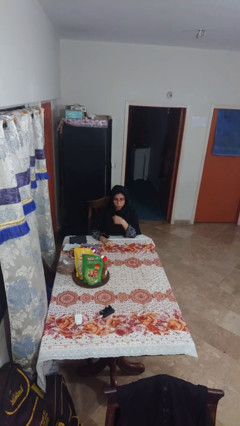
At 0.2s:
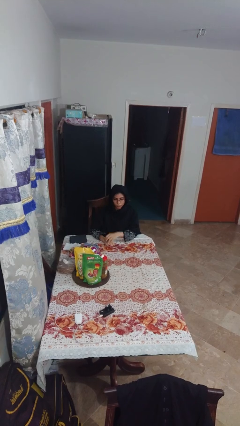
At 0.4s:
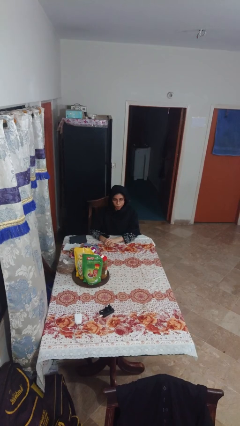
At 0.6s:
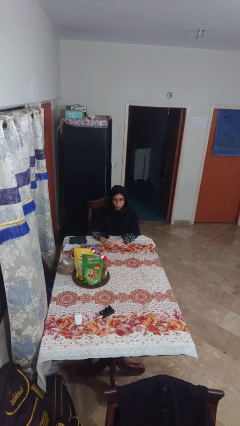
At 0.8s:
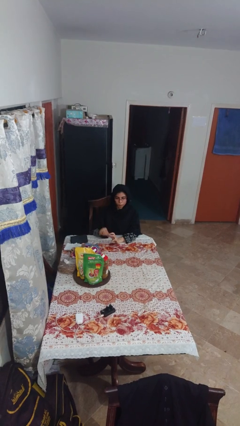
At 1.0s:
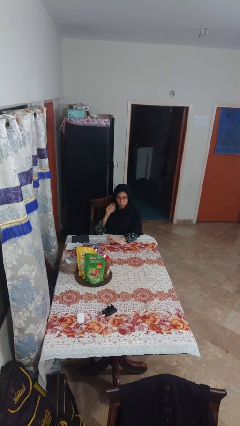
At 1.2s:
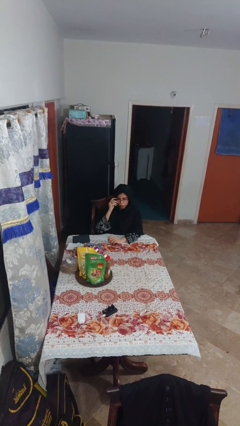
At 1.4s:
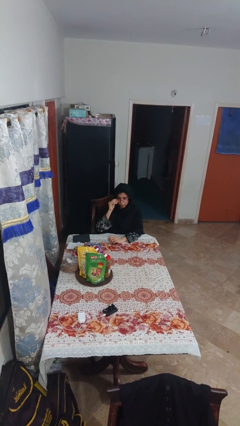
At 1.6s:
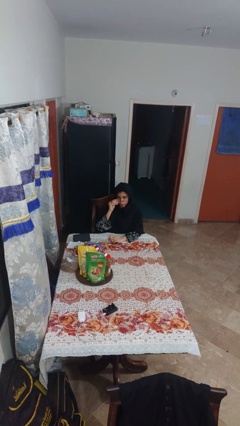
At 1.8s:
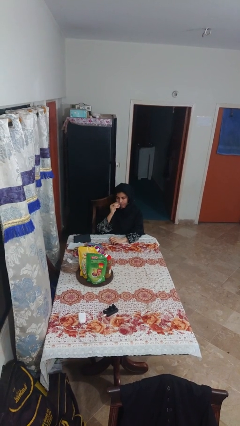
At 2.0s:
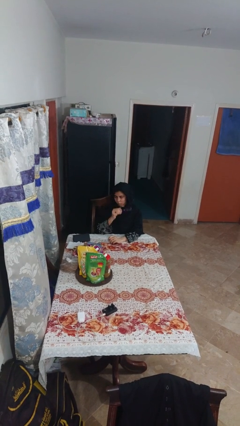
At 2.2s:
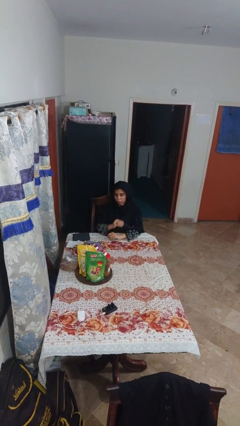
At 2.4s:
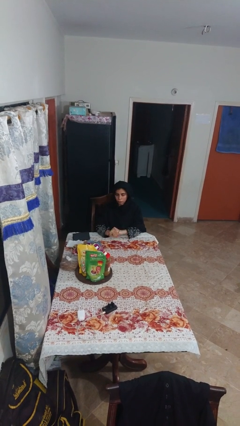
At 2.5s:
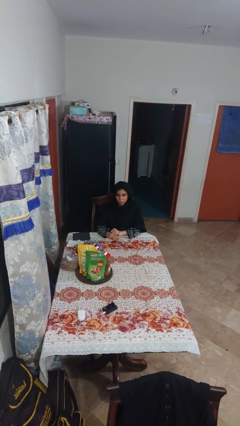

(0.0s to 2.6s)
person takes off glasses

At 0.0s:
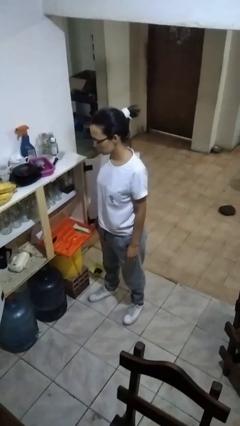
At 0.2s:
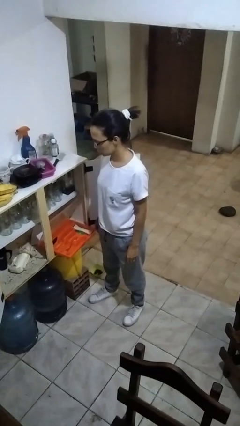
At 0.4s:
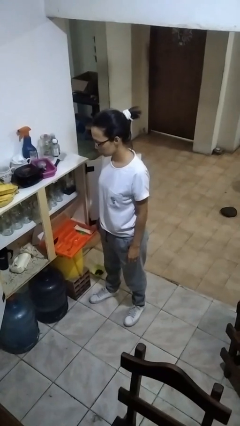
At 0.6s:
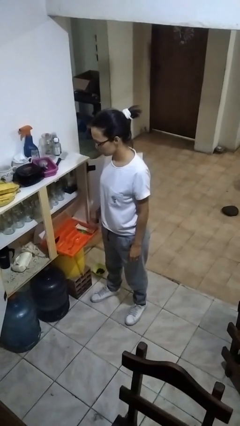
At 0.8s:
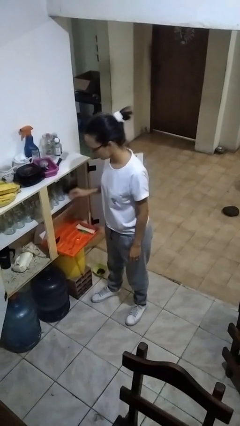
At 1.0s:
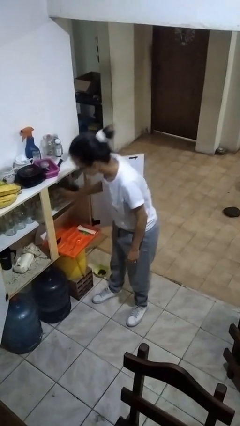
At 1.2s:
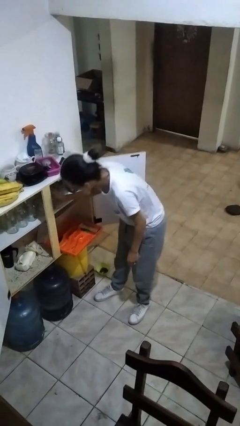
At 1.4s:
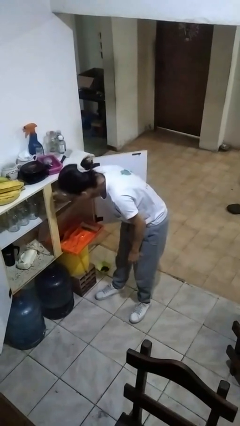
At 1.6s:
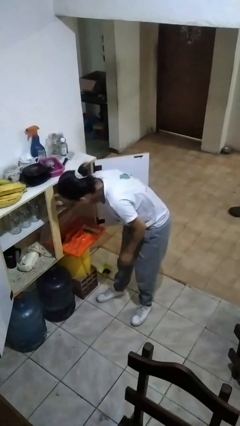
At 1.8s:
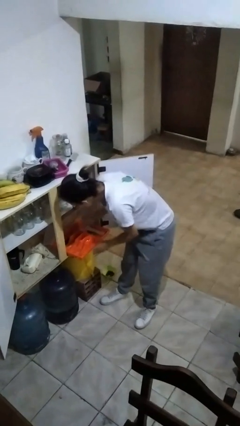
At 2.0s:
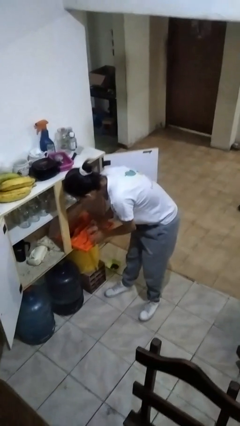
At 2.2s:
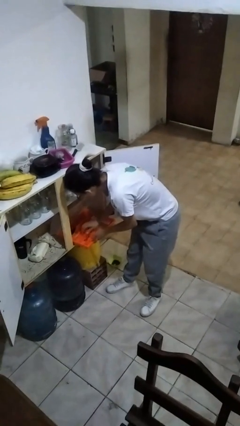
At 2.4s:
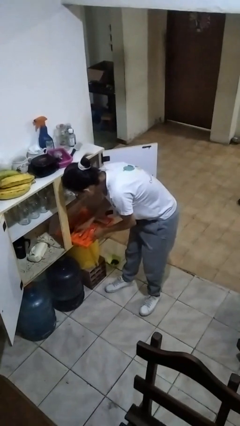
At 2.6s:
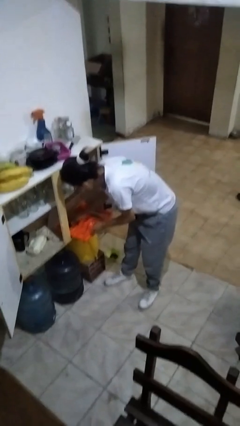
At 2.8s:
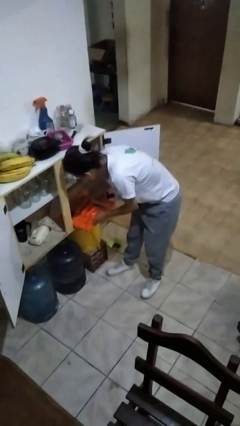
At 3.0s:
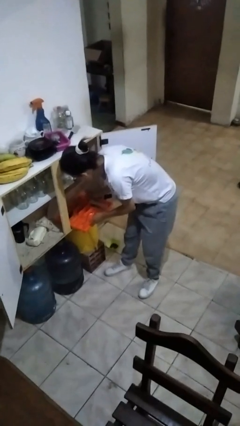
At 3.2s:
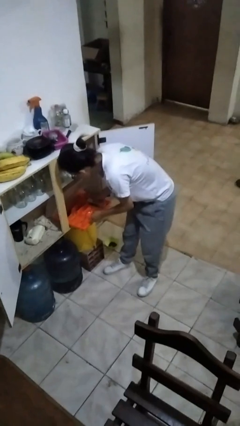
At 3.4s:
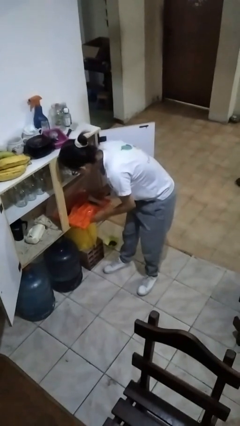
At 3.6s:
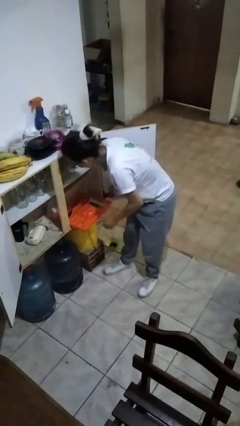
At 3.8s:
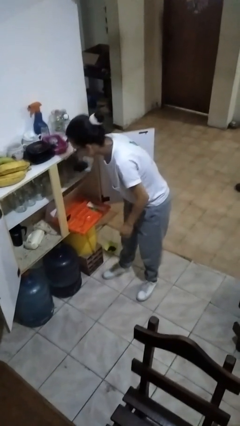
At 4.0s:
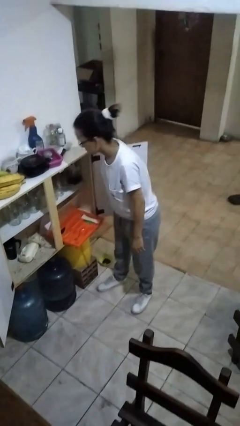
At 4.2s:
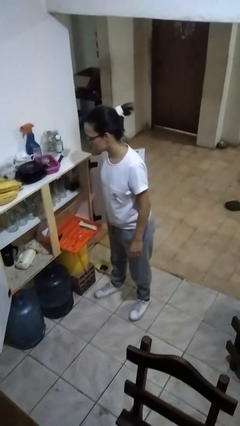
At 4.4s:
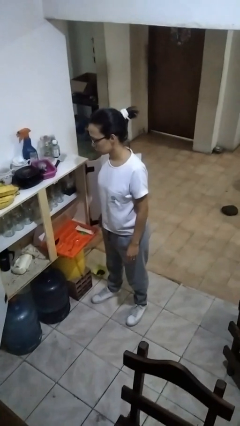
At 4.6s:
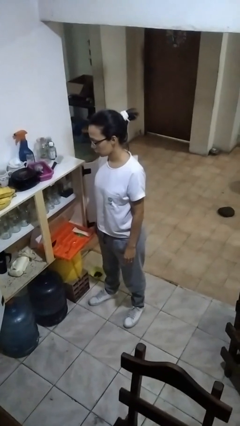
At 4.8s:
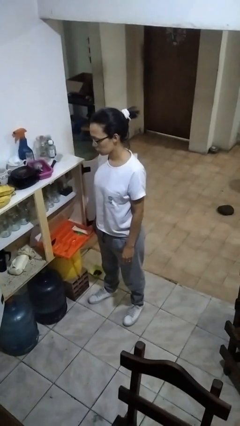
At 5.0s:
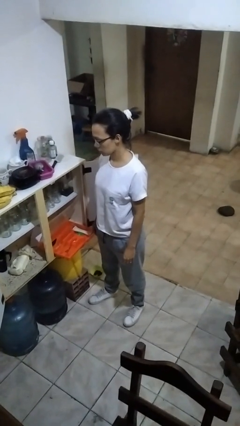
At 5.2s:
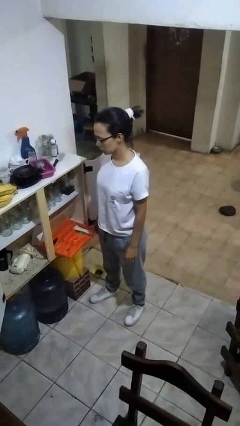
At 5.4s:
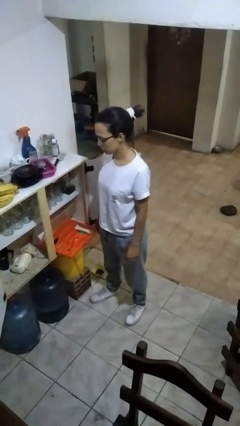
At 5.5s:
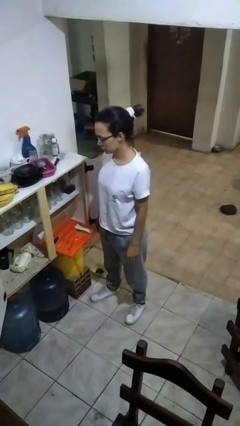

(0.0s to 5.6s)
person searches in kitchen drawer

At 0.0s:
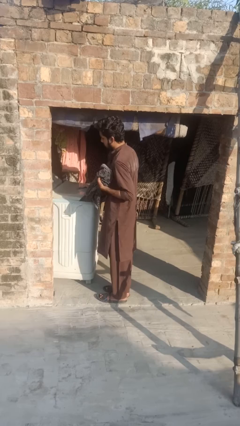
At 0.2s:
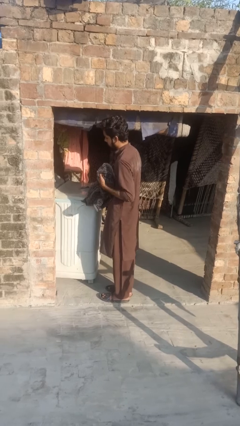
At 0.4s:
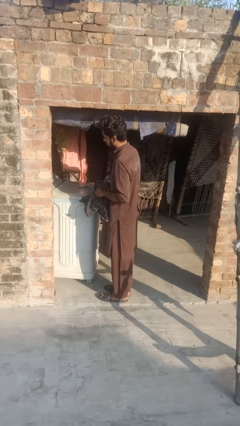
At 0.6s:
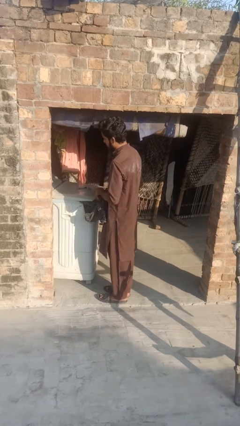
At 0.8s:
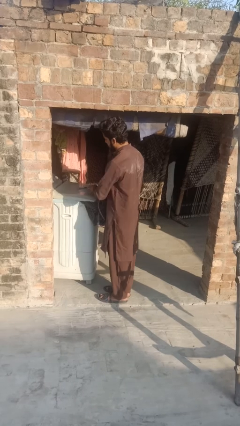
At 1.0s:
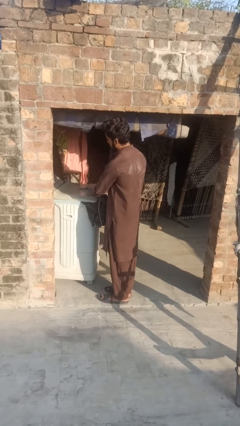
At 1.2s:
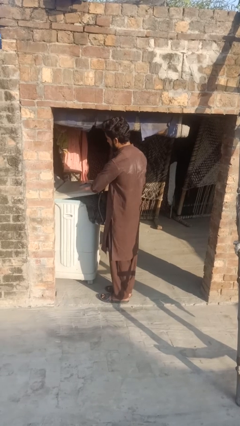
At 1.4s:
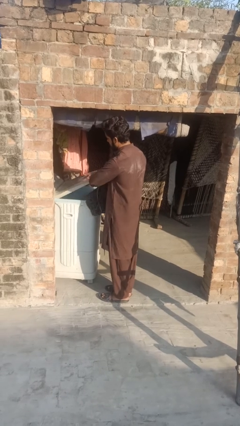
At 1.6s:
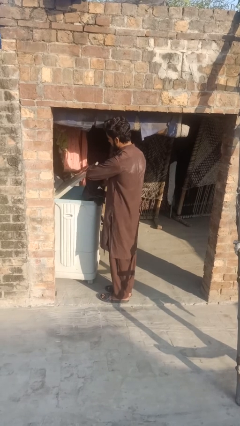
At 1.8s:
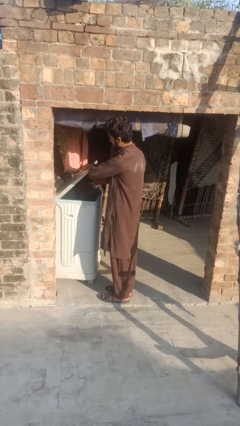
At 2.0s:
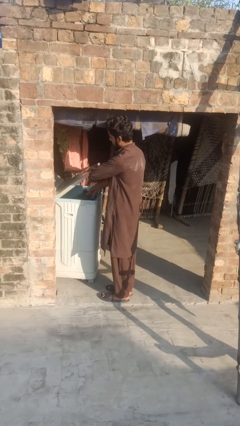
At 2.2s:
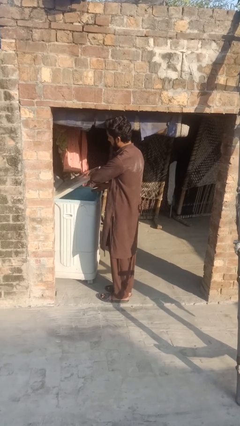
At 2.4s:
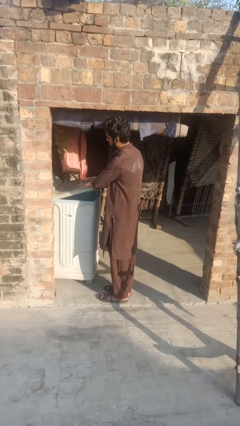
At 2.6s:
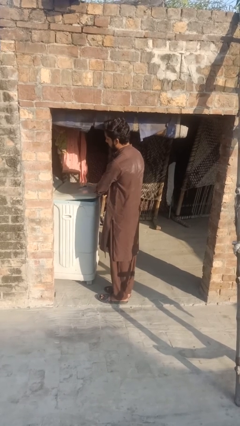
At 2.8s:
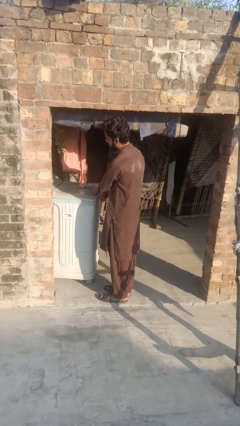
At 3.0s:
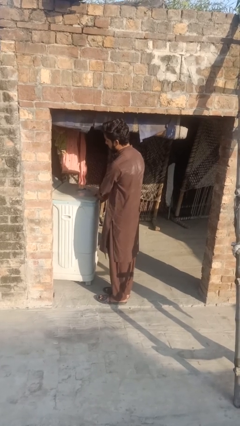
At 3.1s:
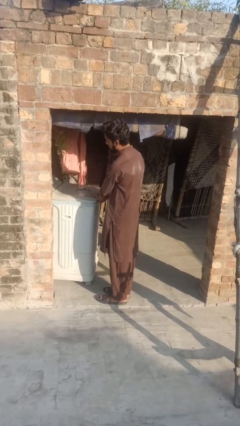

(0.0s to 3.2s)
person loads dryer

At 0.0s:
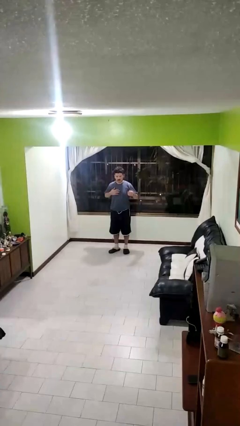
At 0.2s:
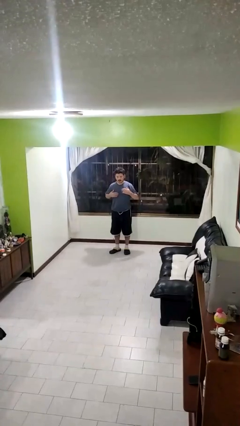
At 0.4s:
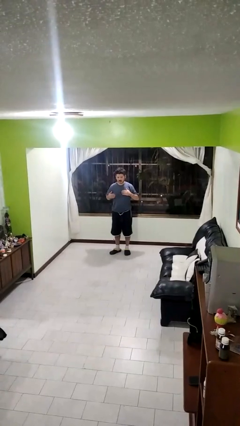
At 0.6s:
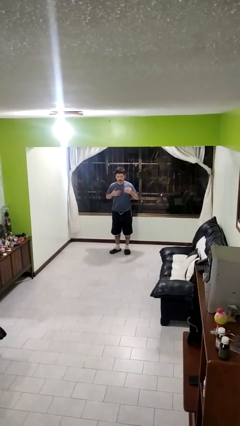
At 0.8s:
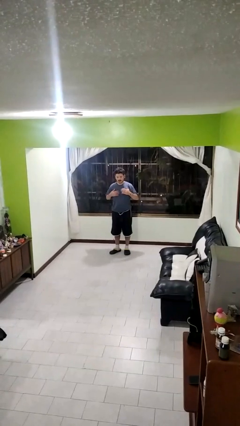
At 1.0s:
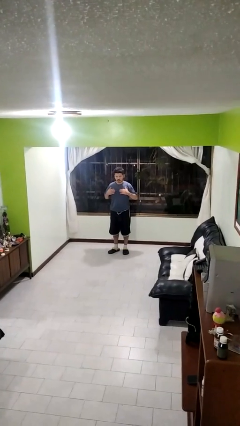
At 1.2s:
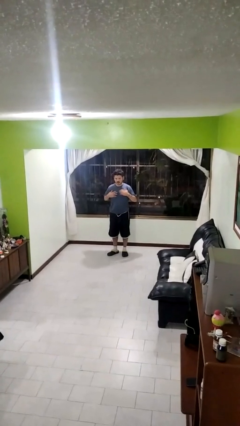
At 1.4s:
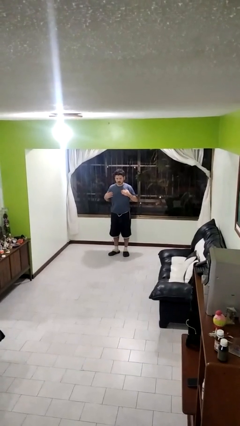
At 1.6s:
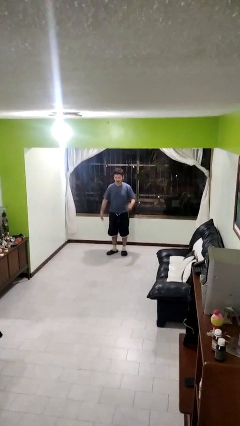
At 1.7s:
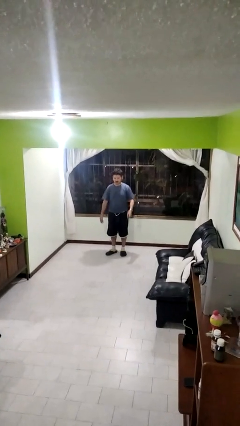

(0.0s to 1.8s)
person drums on chest

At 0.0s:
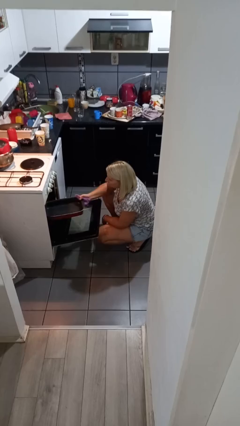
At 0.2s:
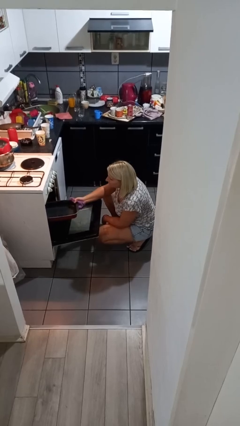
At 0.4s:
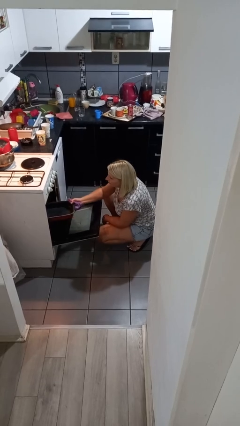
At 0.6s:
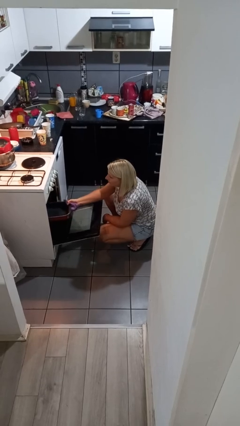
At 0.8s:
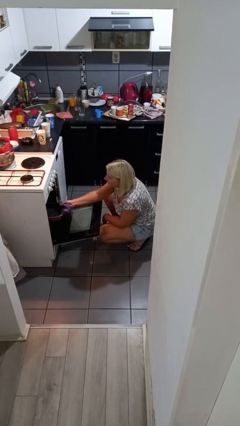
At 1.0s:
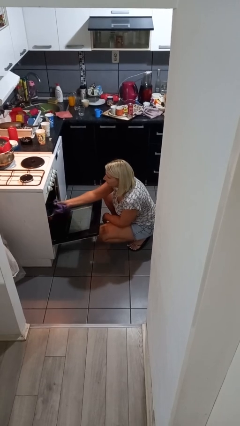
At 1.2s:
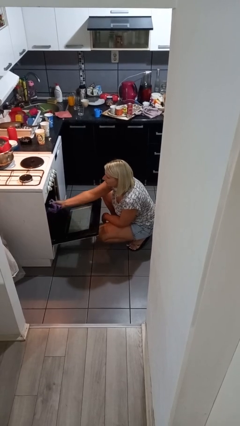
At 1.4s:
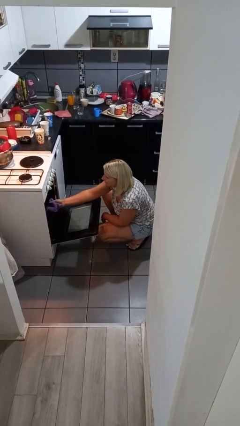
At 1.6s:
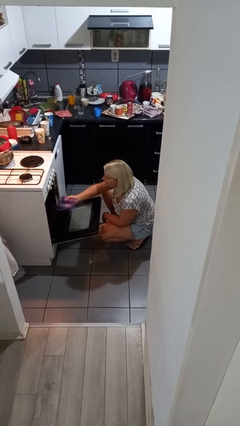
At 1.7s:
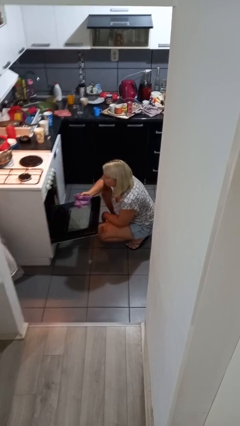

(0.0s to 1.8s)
person puts object into oven

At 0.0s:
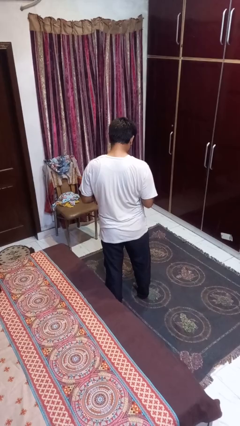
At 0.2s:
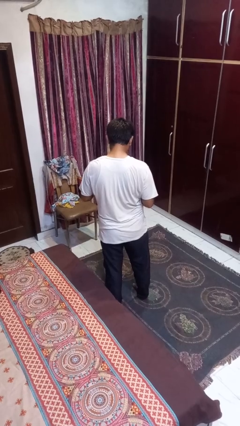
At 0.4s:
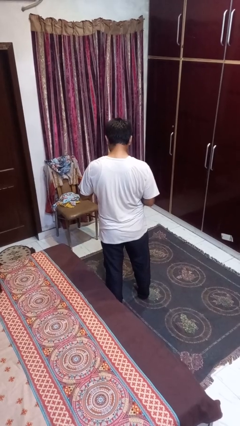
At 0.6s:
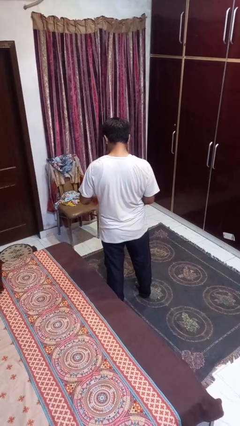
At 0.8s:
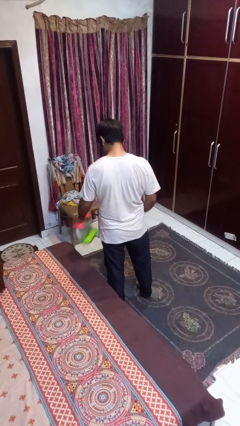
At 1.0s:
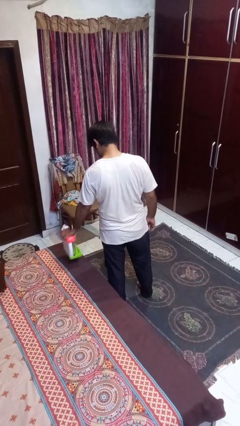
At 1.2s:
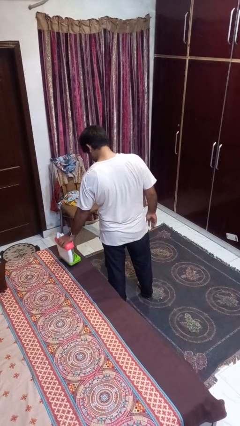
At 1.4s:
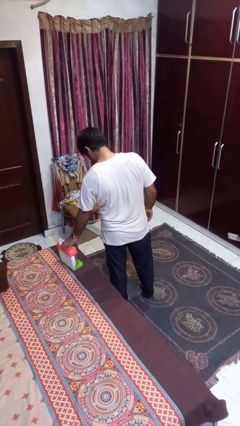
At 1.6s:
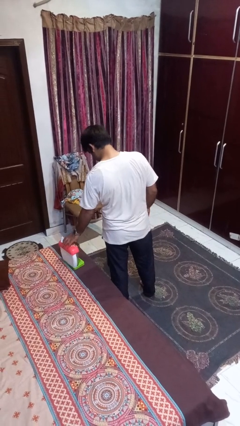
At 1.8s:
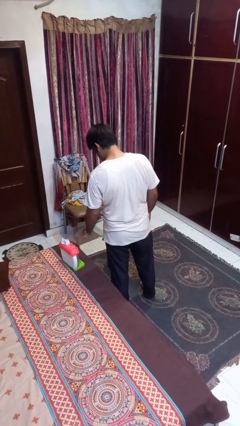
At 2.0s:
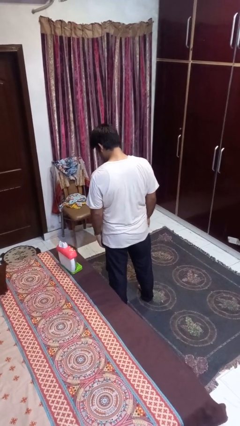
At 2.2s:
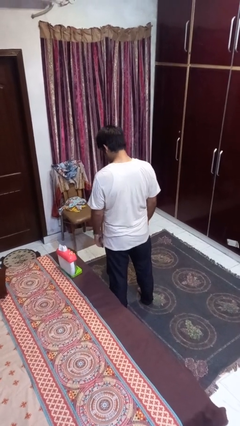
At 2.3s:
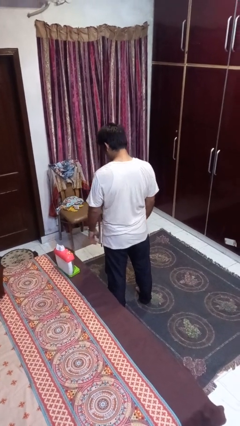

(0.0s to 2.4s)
person puts down object on bed

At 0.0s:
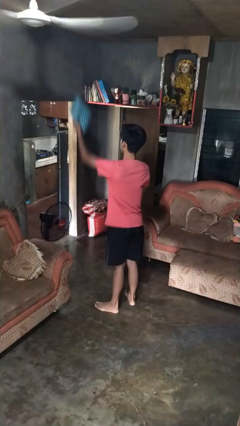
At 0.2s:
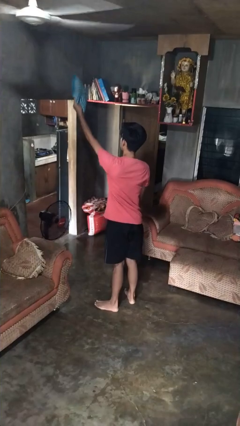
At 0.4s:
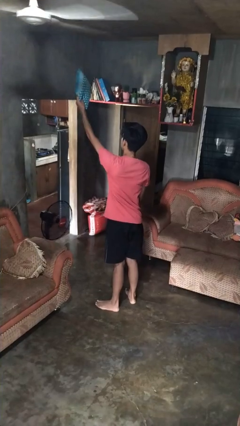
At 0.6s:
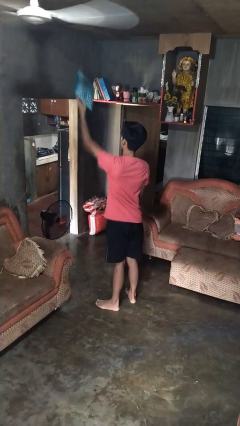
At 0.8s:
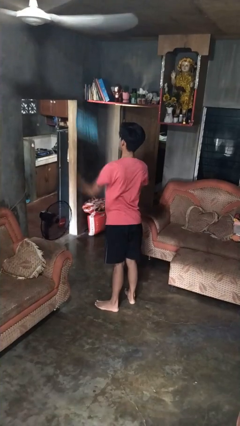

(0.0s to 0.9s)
person drops object
